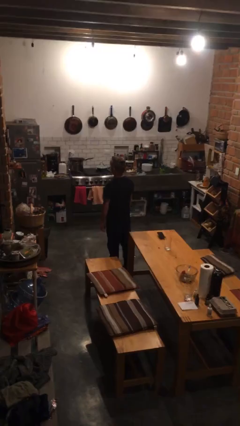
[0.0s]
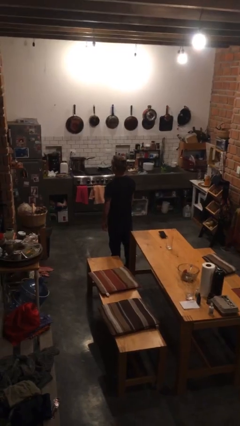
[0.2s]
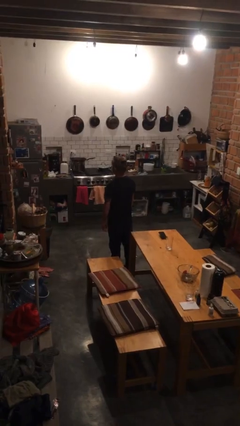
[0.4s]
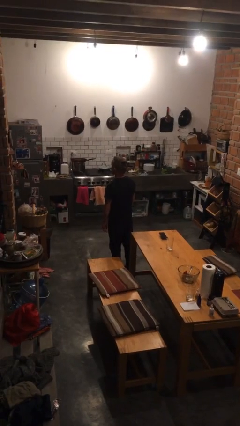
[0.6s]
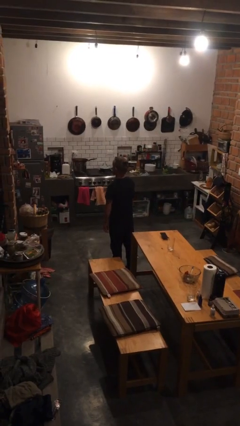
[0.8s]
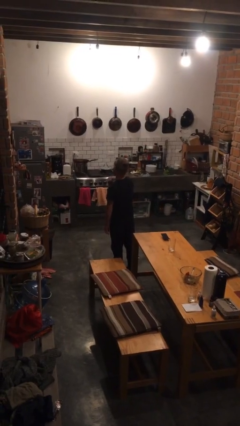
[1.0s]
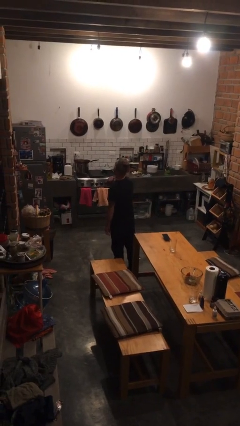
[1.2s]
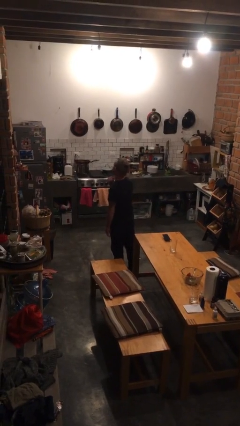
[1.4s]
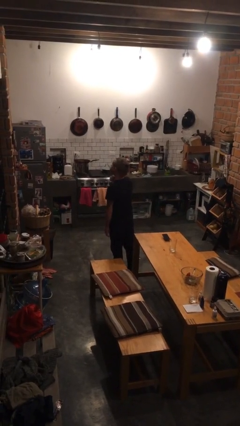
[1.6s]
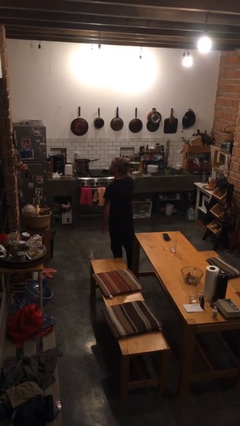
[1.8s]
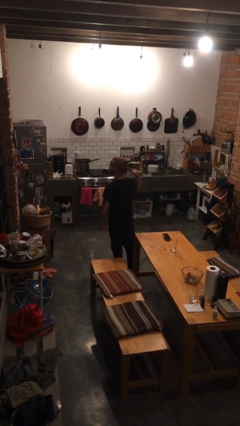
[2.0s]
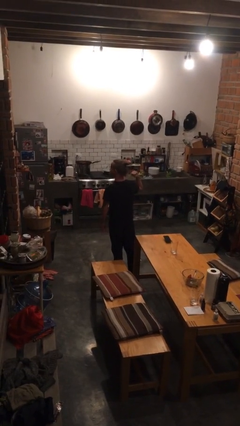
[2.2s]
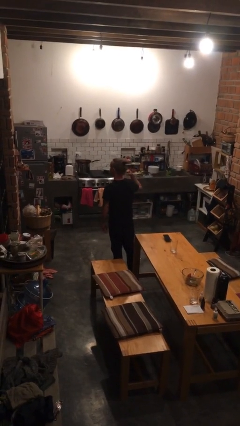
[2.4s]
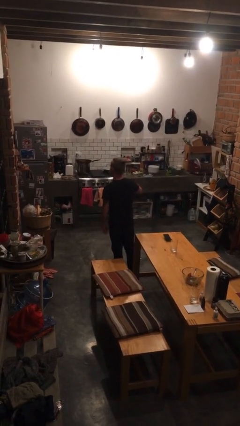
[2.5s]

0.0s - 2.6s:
person gestures cut

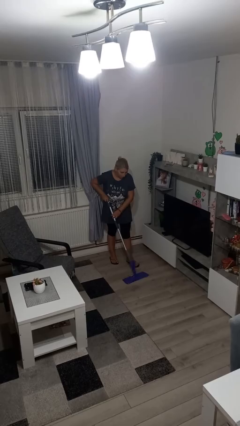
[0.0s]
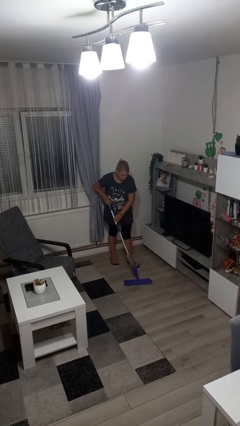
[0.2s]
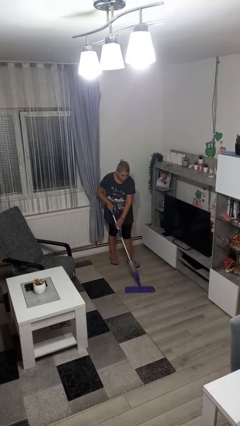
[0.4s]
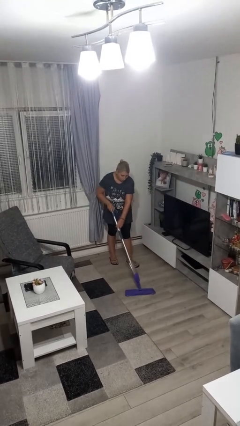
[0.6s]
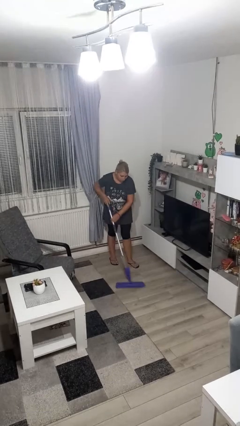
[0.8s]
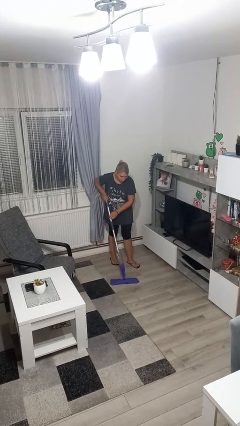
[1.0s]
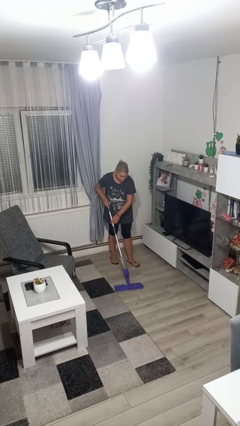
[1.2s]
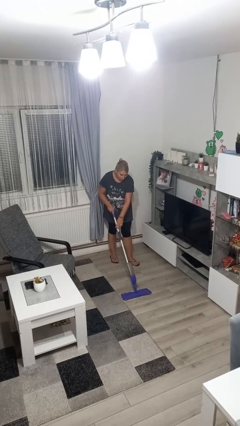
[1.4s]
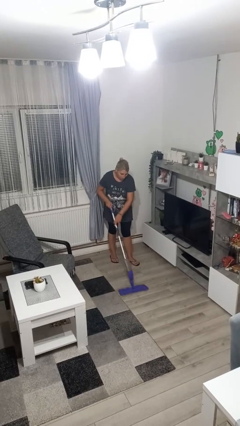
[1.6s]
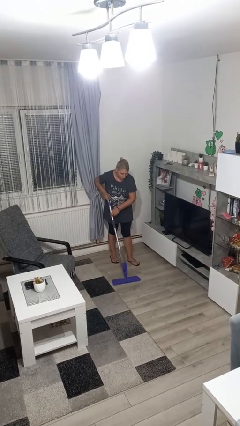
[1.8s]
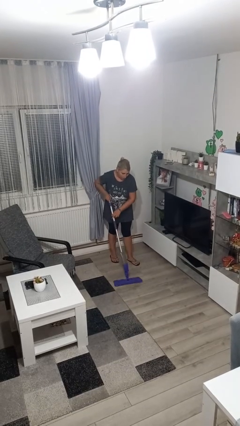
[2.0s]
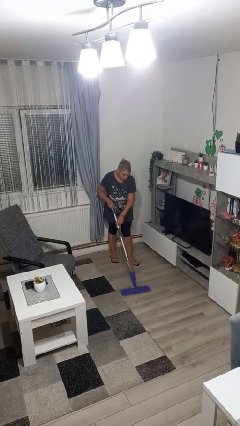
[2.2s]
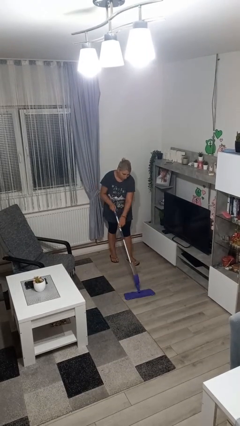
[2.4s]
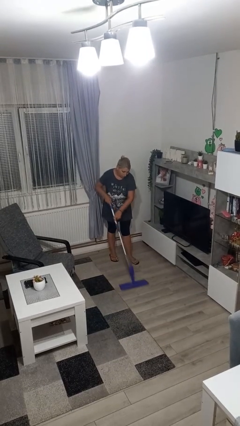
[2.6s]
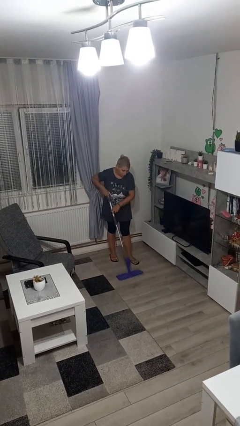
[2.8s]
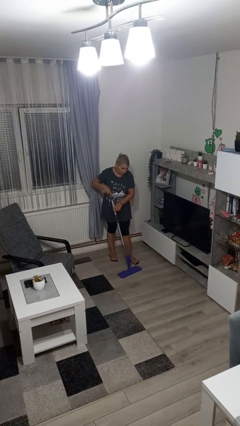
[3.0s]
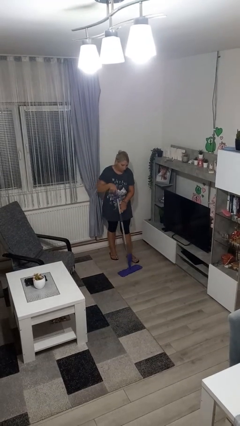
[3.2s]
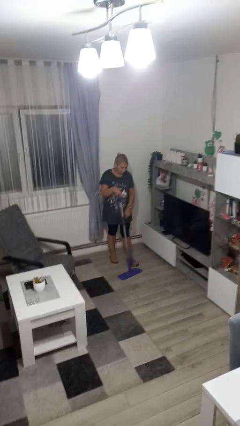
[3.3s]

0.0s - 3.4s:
person mops

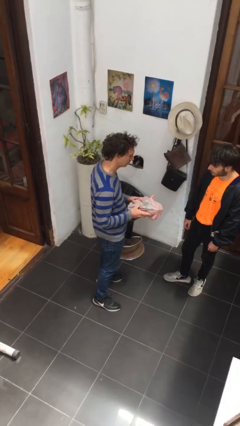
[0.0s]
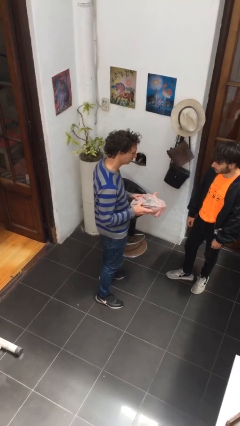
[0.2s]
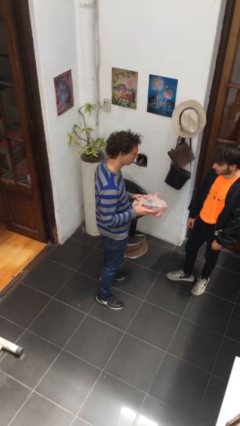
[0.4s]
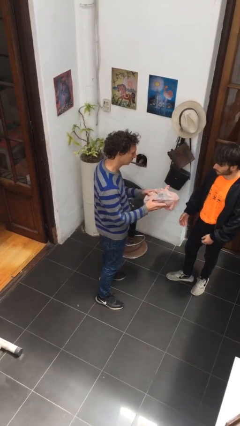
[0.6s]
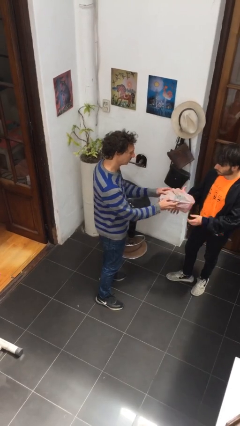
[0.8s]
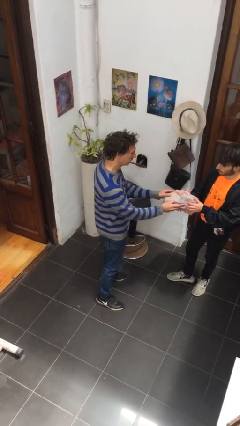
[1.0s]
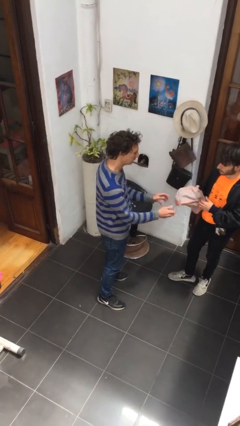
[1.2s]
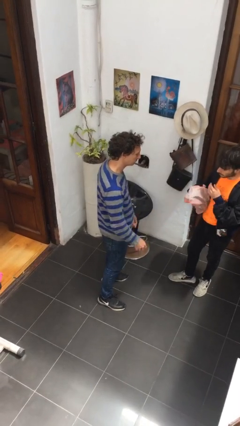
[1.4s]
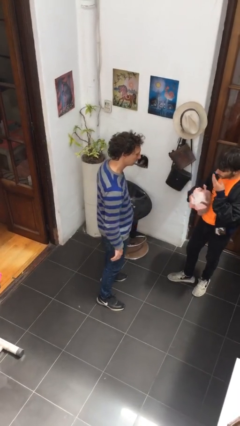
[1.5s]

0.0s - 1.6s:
person transfers object to person

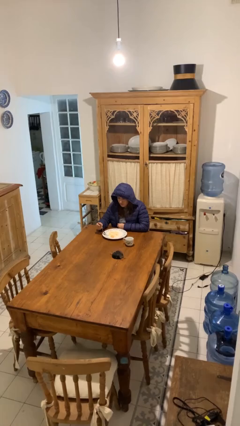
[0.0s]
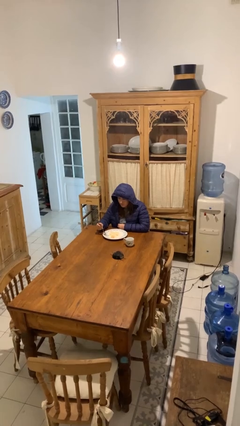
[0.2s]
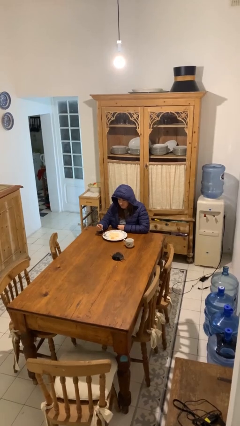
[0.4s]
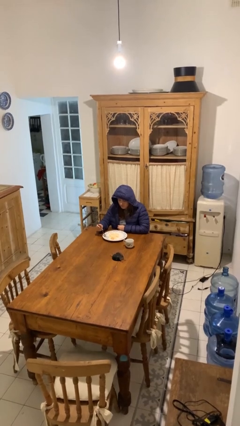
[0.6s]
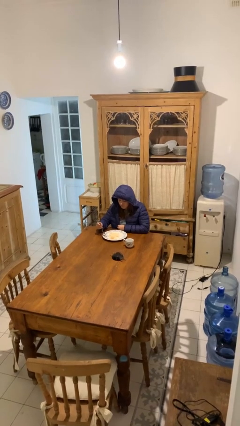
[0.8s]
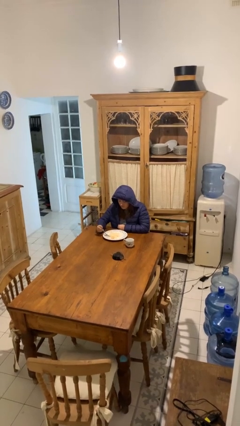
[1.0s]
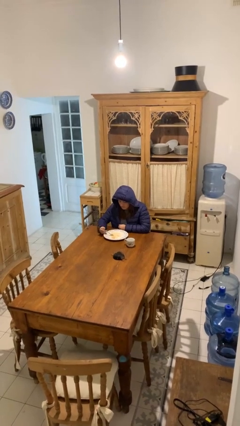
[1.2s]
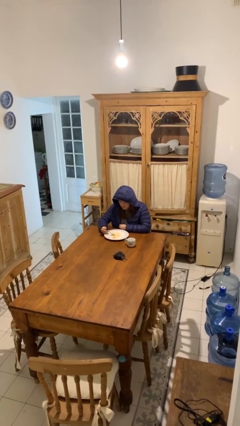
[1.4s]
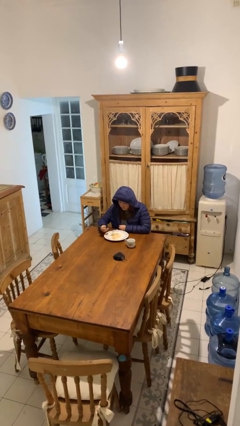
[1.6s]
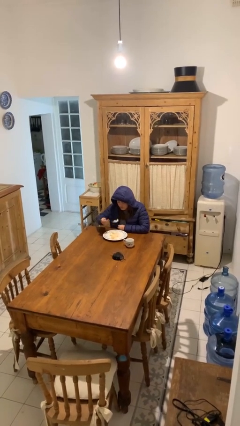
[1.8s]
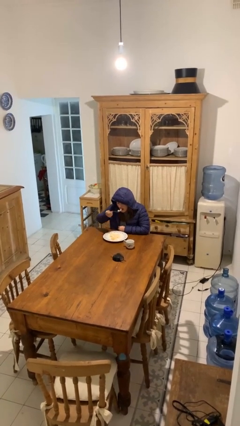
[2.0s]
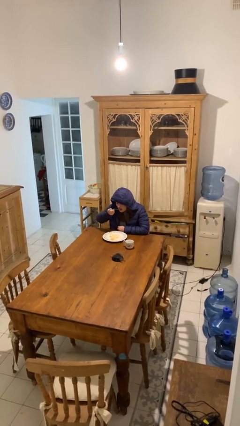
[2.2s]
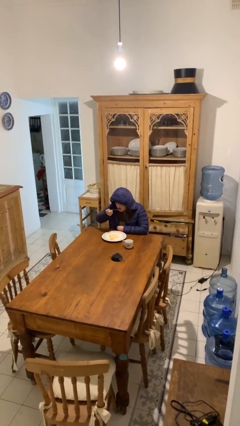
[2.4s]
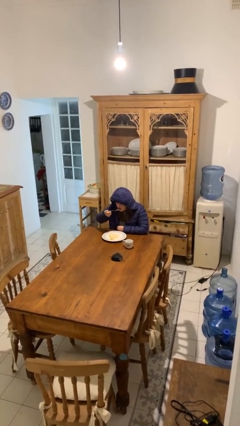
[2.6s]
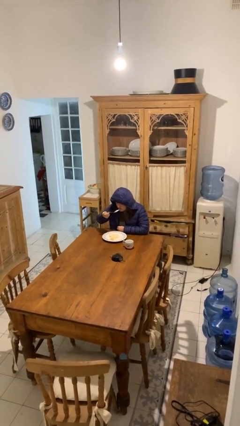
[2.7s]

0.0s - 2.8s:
person eats with utensil

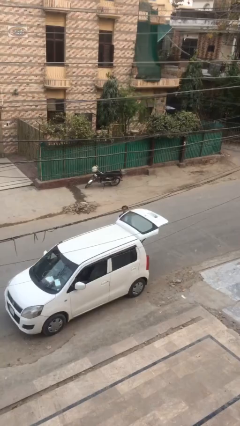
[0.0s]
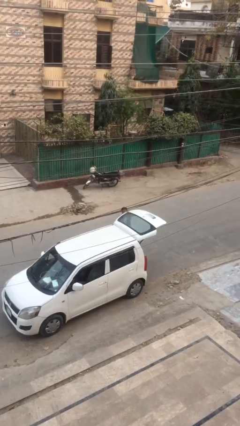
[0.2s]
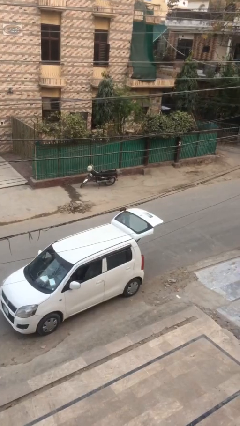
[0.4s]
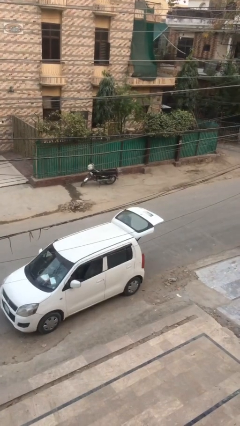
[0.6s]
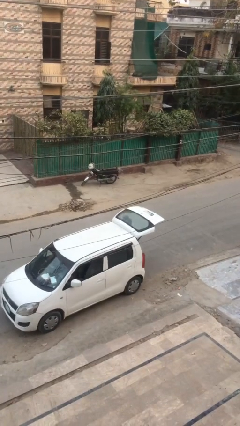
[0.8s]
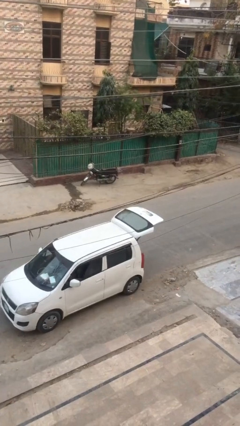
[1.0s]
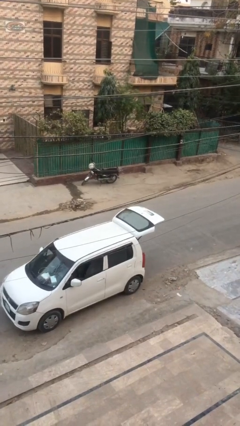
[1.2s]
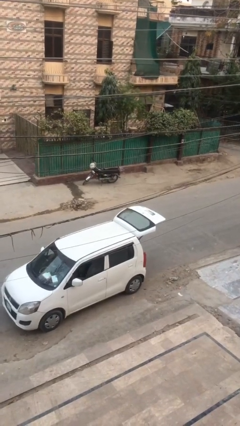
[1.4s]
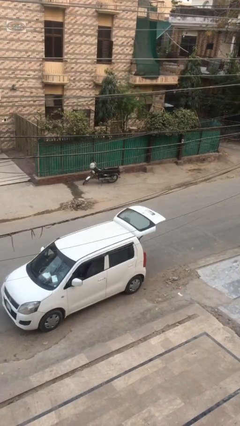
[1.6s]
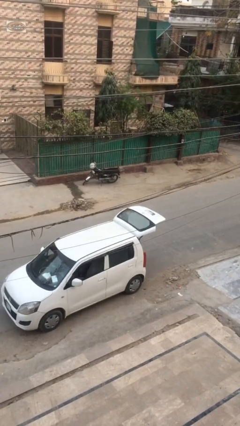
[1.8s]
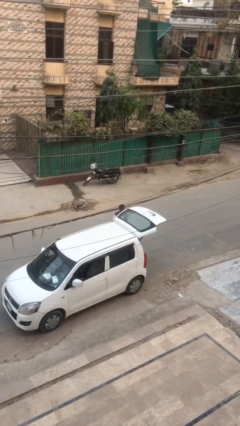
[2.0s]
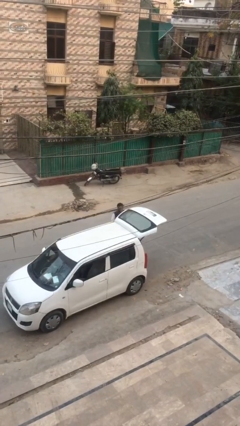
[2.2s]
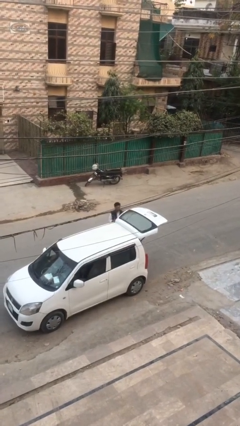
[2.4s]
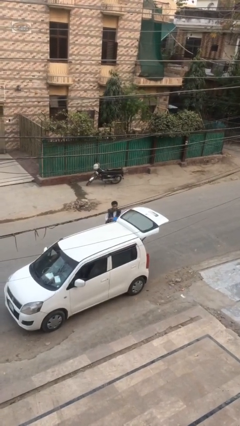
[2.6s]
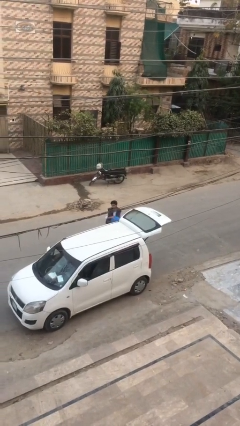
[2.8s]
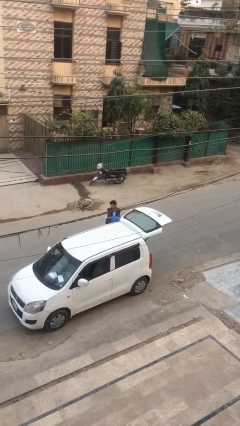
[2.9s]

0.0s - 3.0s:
person unloads car

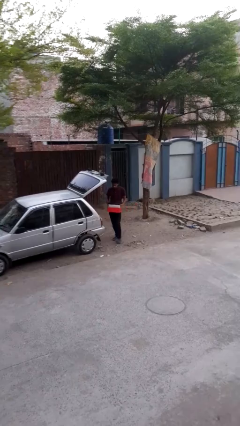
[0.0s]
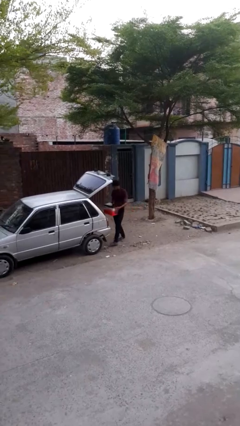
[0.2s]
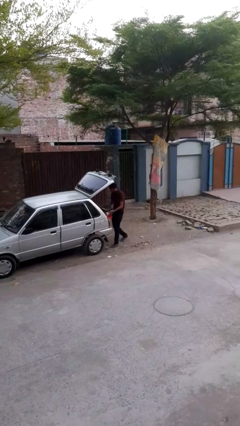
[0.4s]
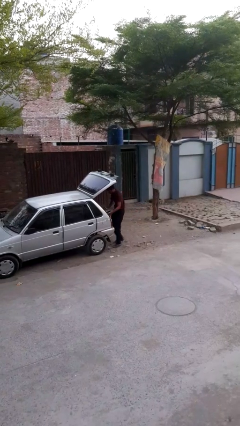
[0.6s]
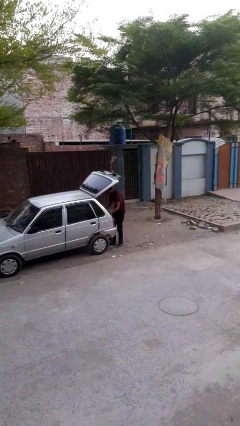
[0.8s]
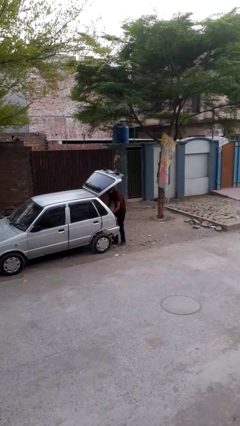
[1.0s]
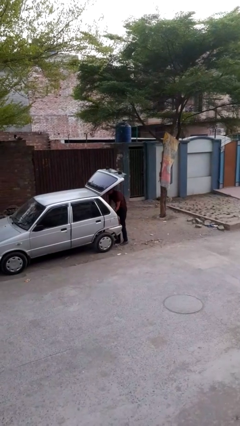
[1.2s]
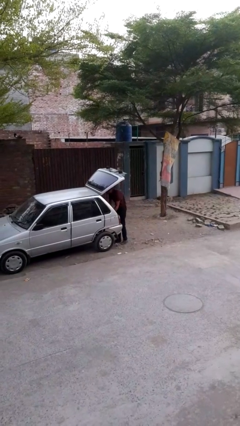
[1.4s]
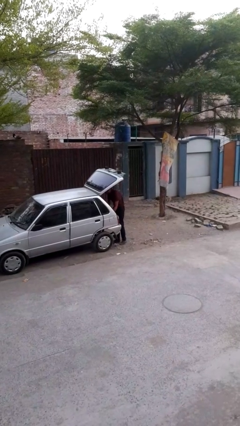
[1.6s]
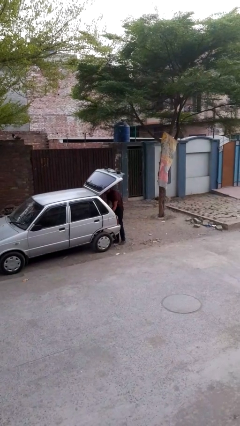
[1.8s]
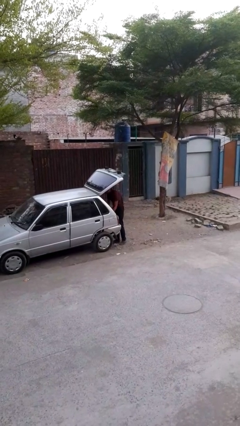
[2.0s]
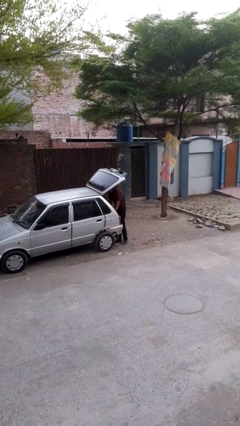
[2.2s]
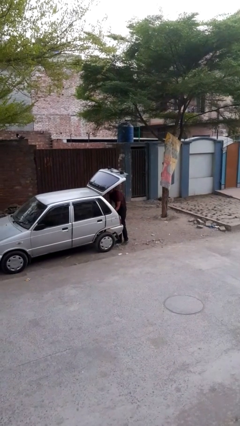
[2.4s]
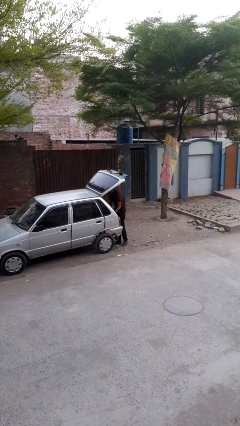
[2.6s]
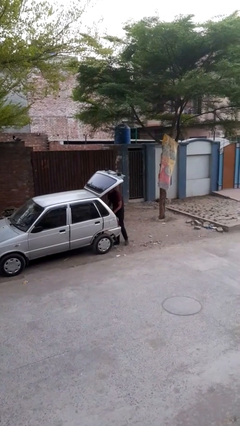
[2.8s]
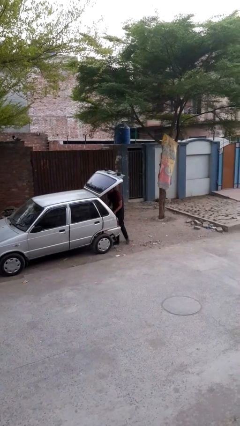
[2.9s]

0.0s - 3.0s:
person loads car

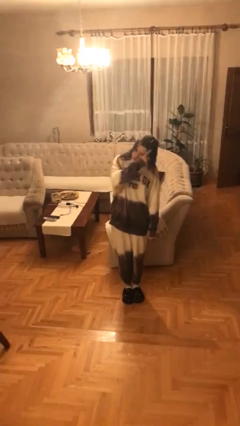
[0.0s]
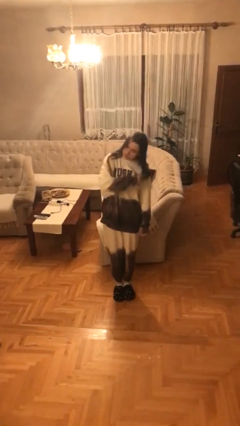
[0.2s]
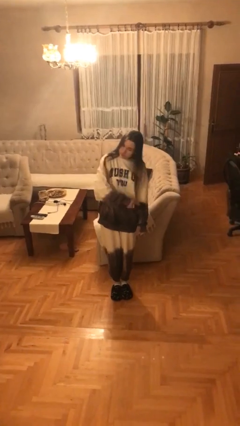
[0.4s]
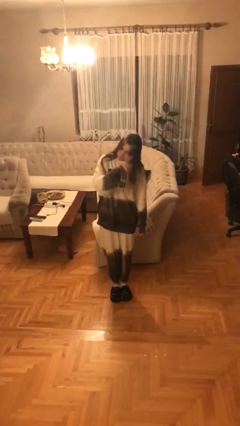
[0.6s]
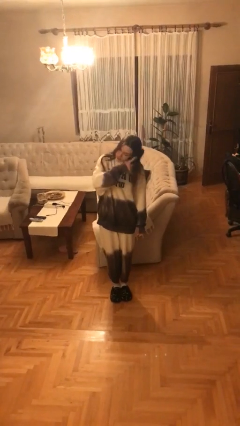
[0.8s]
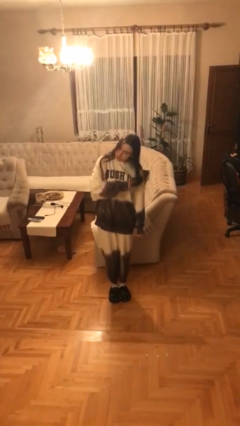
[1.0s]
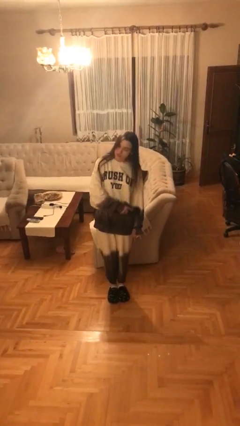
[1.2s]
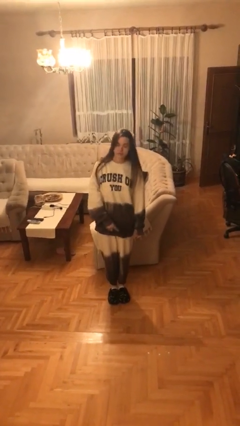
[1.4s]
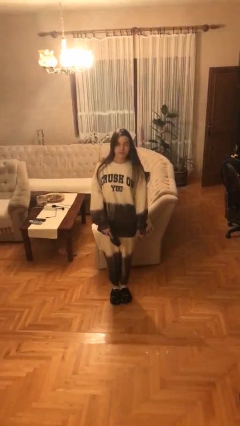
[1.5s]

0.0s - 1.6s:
person brushes hair
